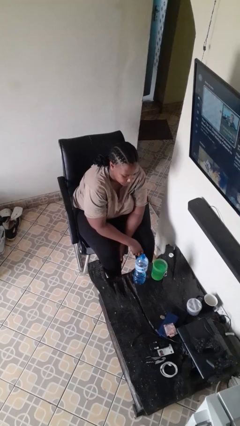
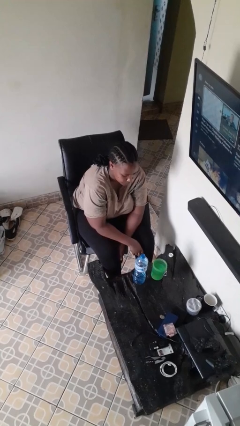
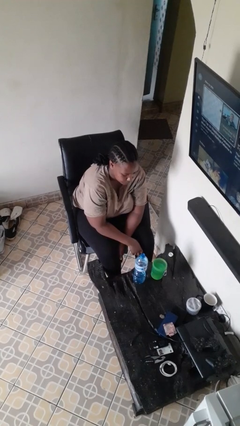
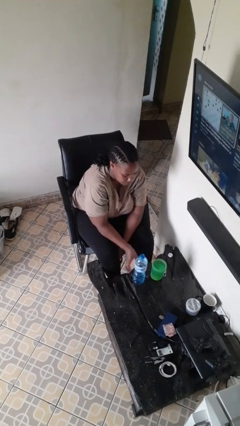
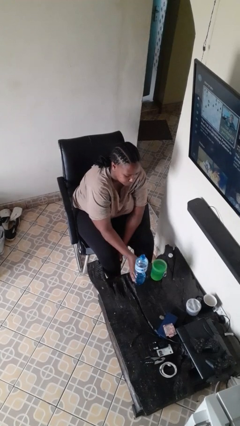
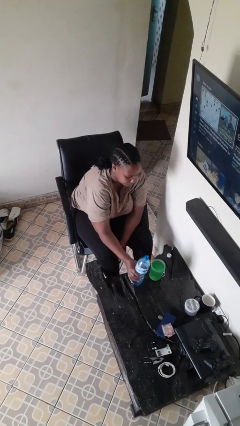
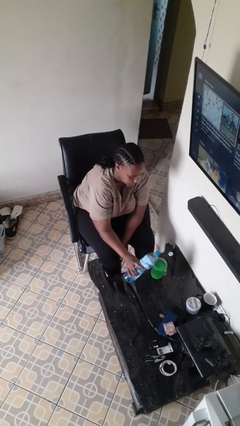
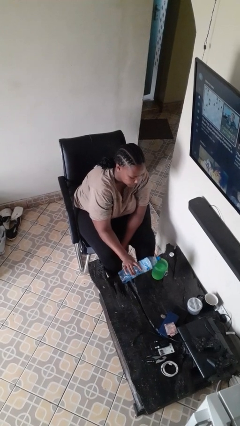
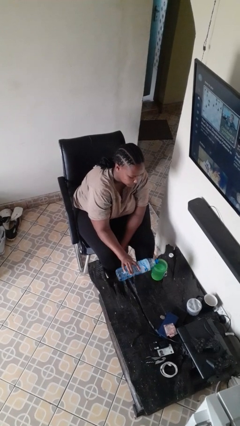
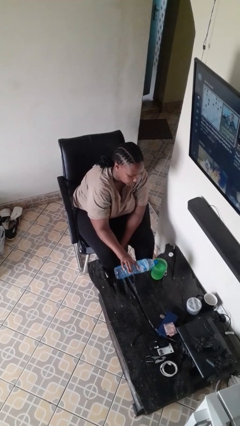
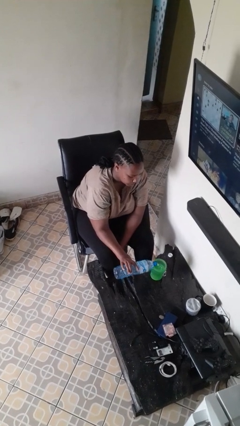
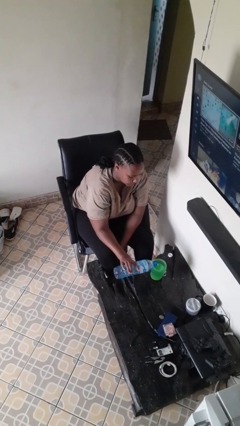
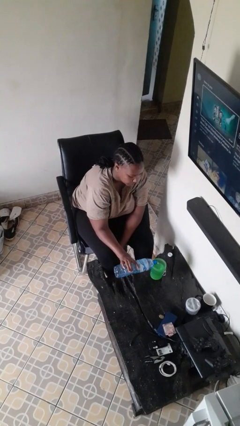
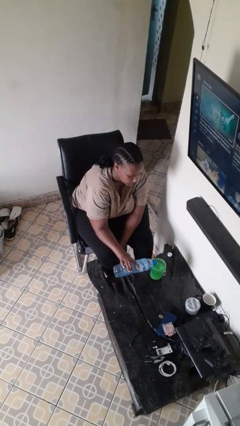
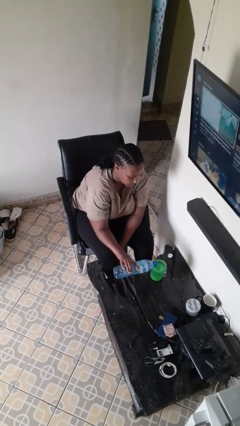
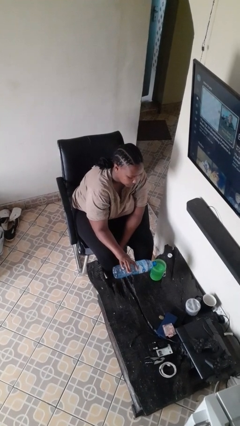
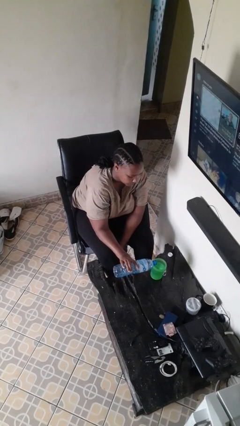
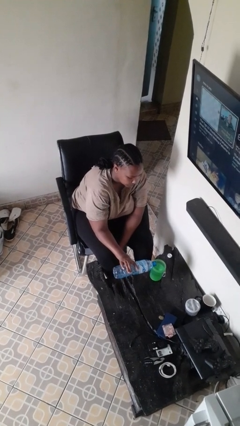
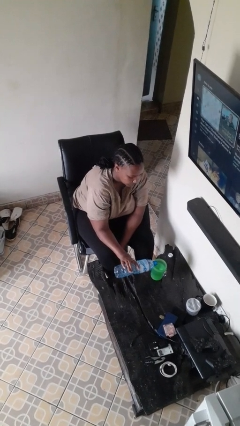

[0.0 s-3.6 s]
person pours liquid into cup

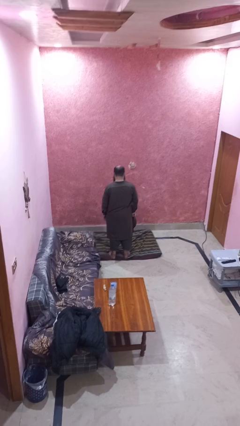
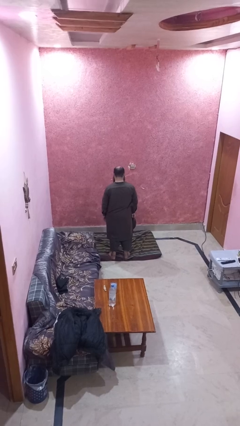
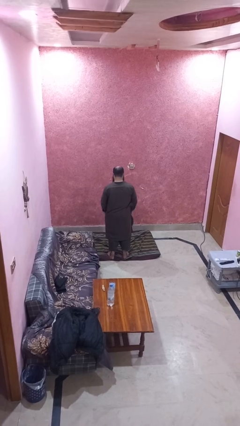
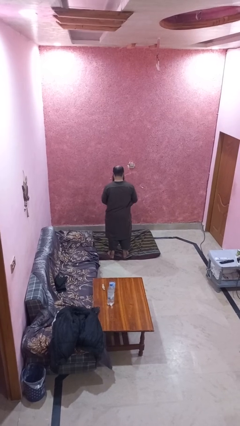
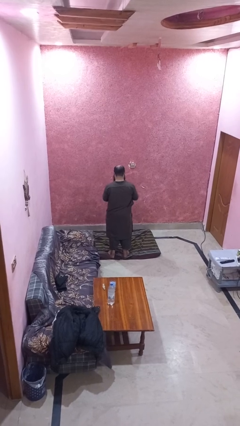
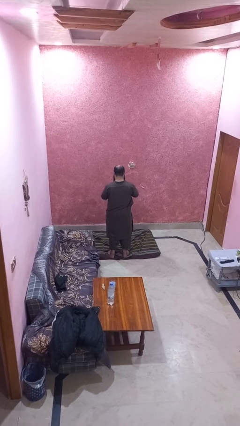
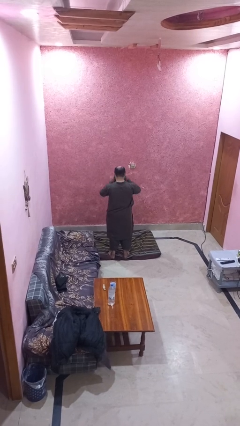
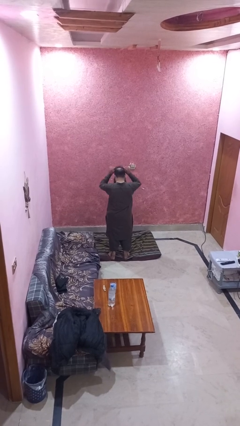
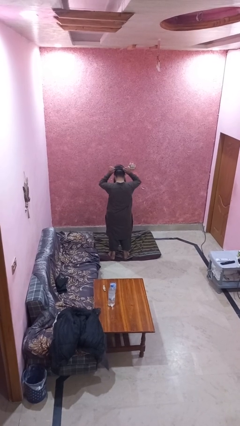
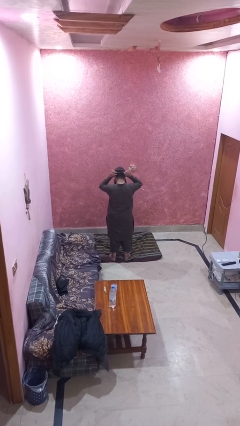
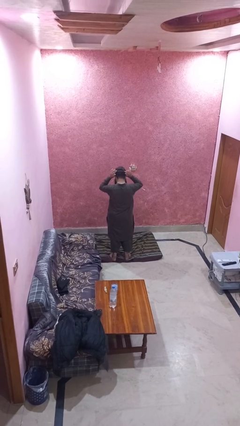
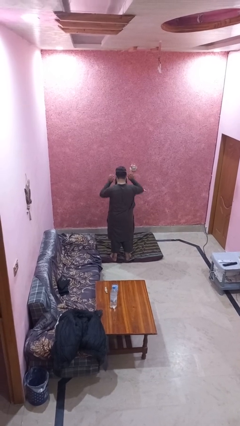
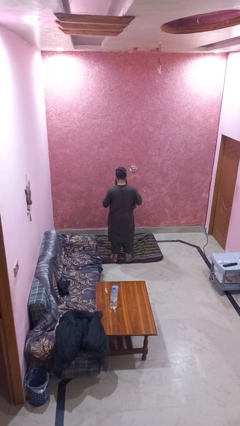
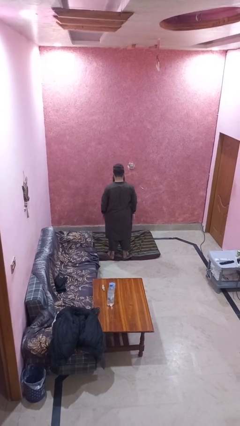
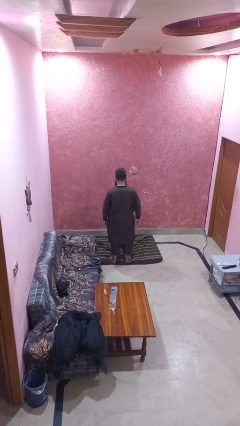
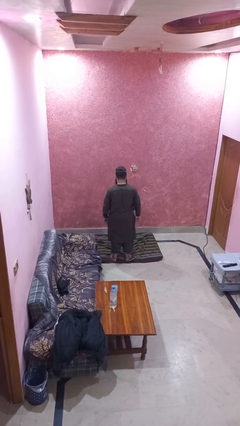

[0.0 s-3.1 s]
person puts on hat

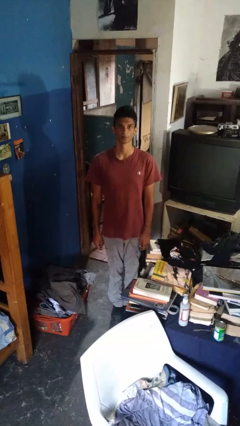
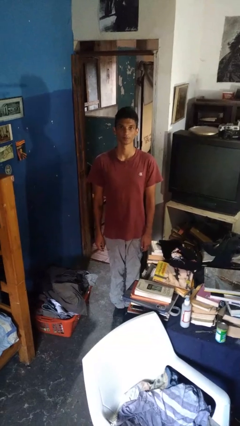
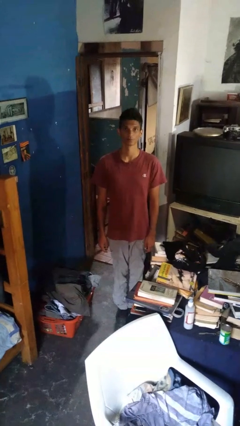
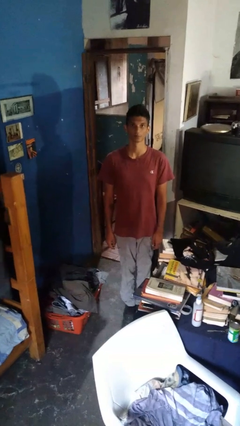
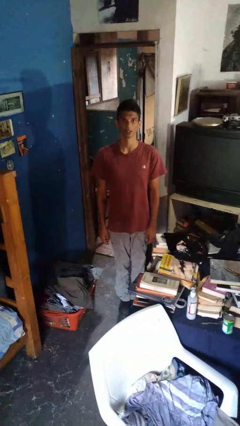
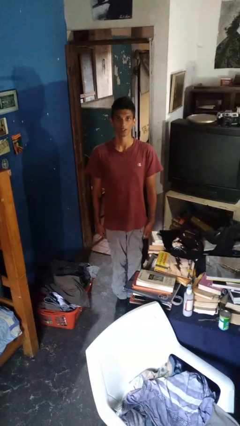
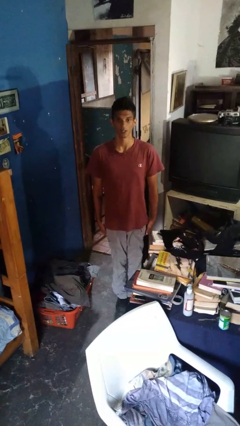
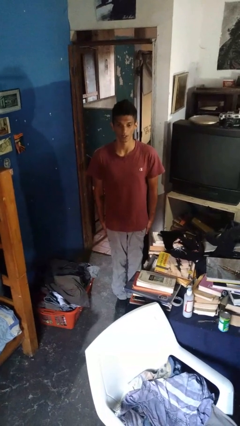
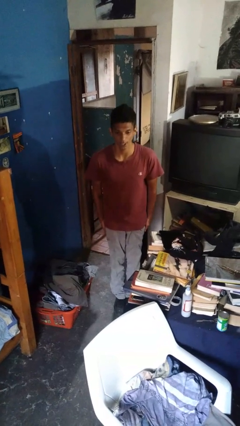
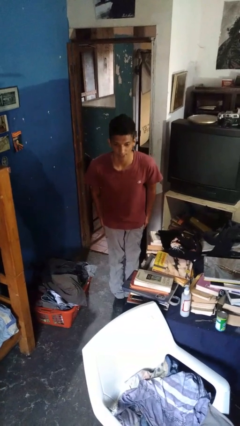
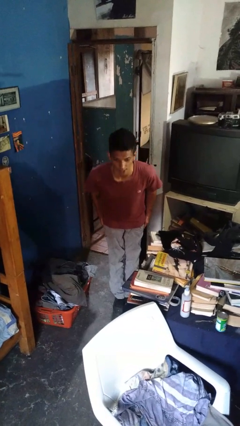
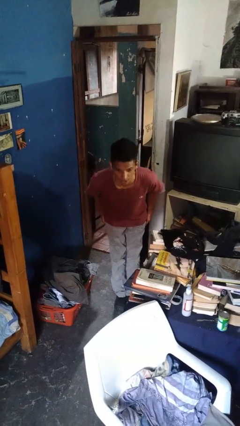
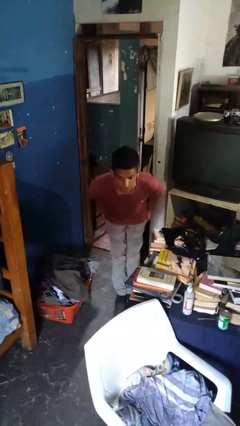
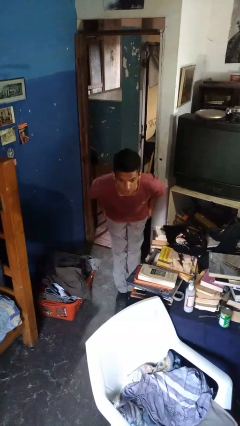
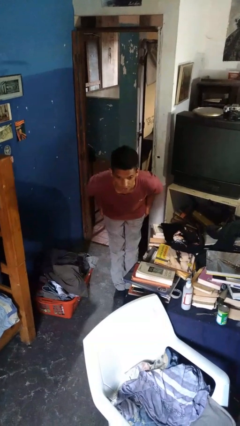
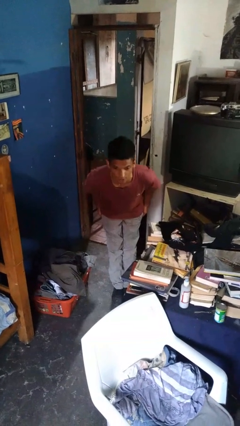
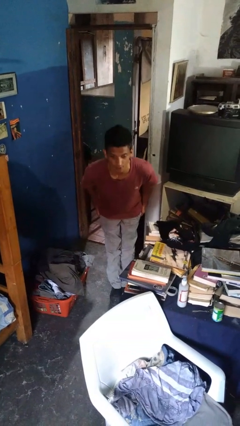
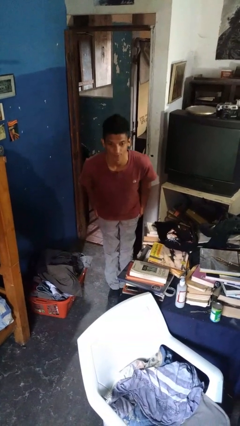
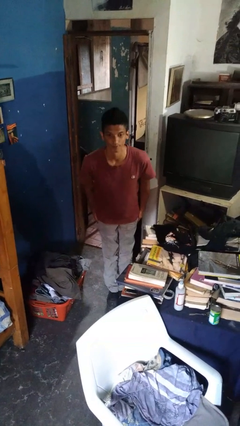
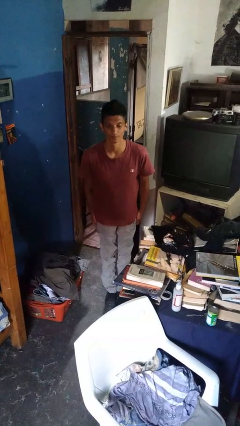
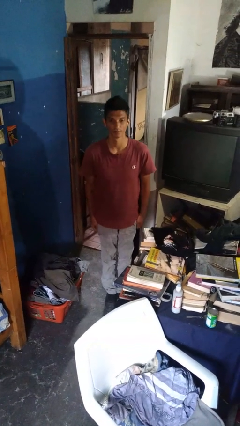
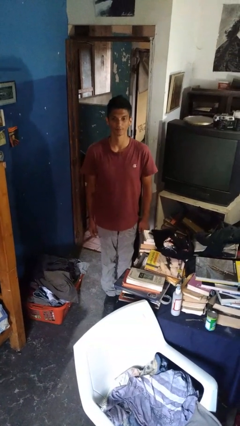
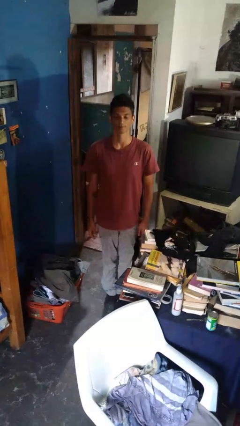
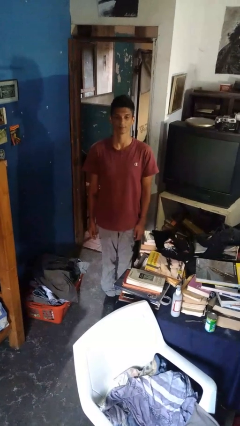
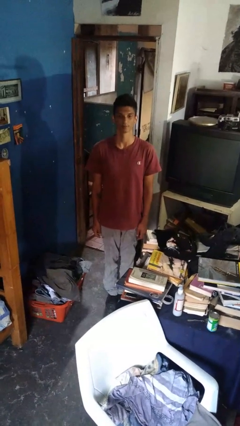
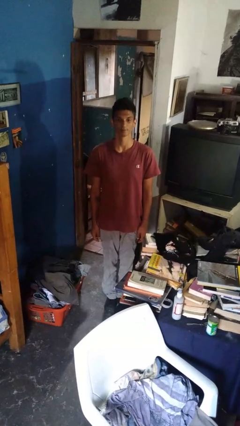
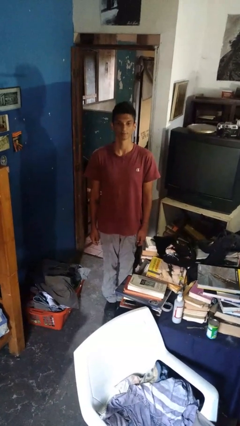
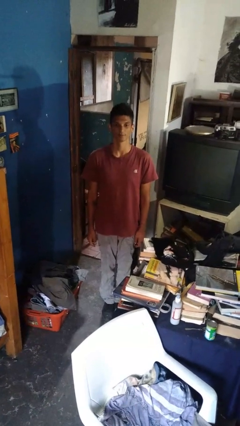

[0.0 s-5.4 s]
person bows

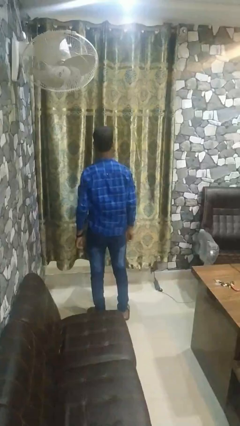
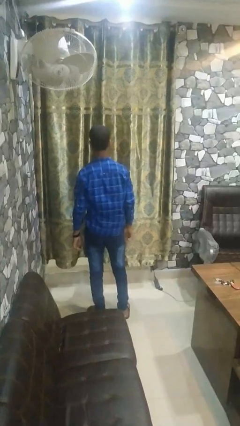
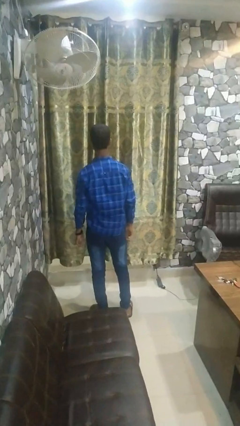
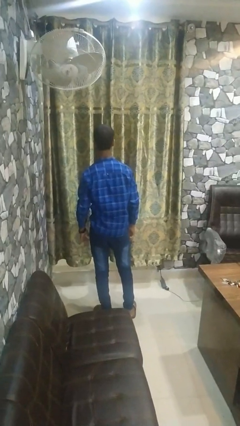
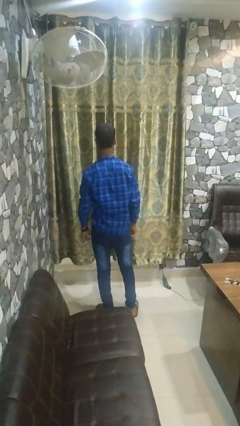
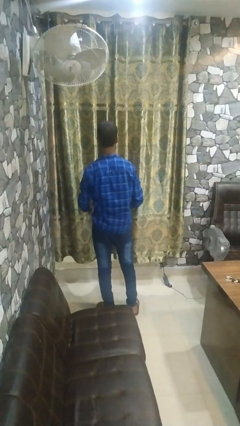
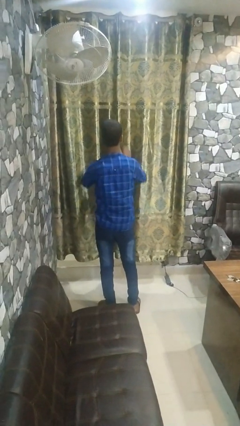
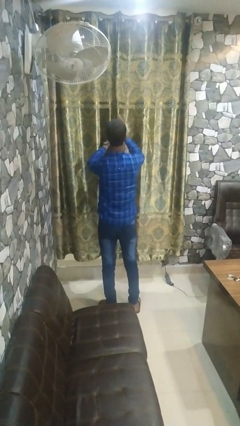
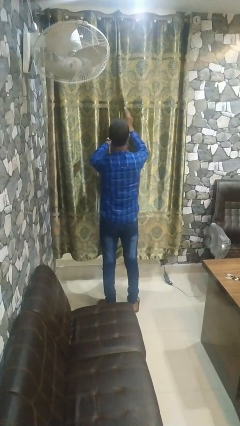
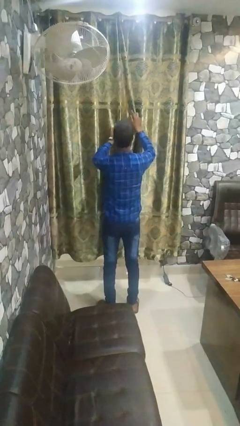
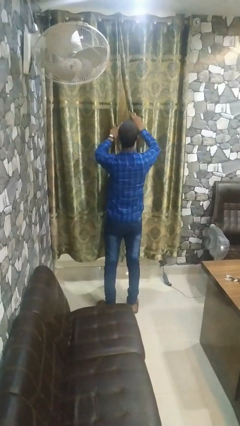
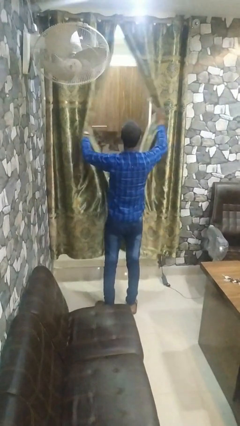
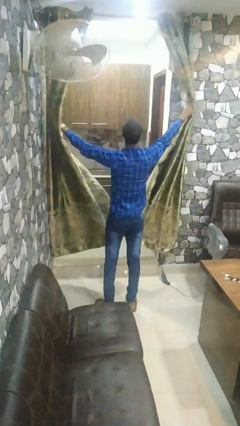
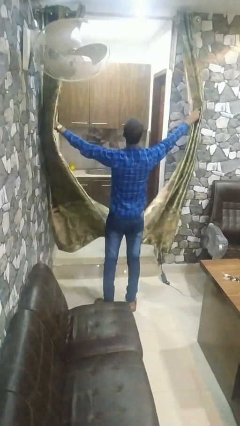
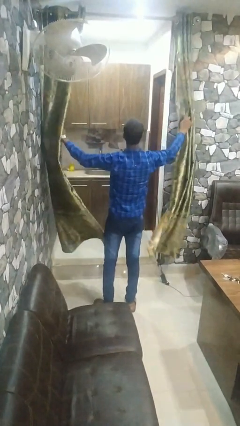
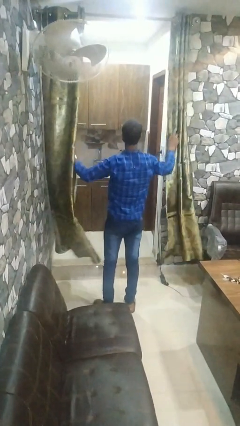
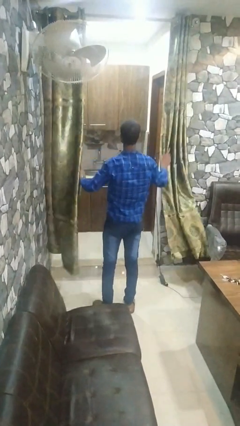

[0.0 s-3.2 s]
person opens curtains

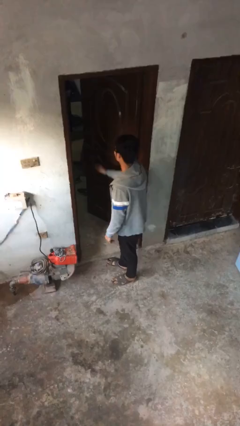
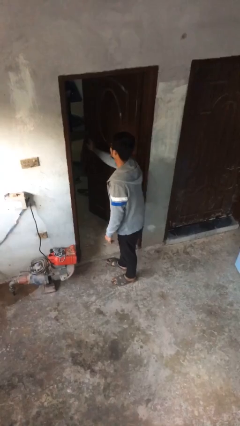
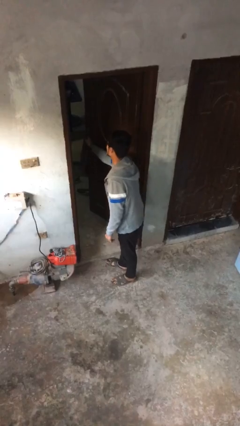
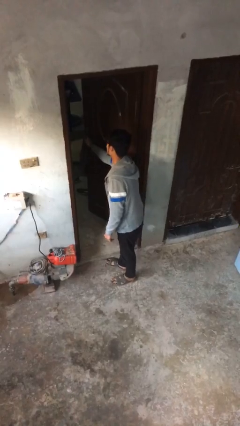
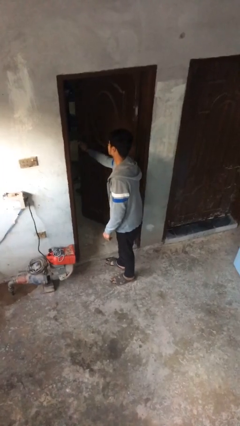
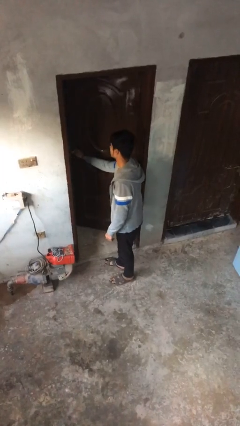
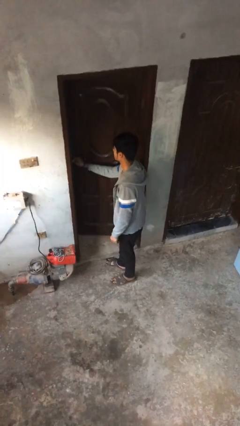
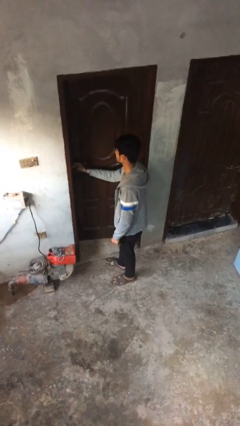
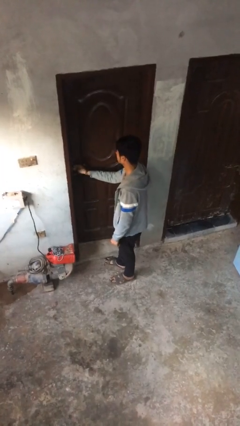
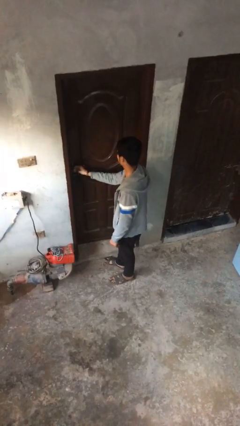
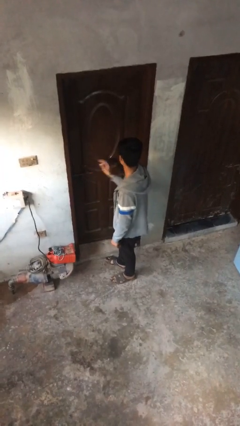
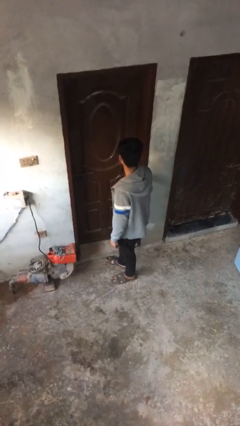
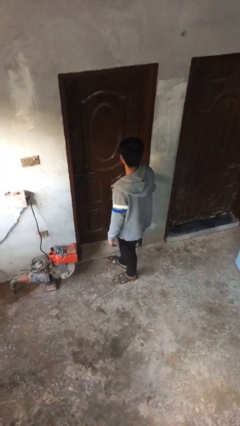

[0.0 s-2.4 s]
person closes facility door
